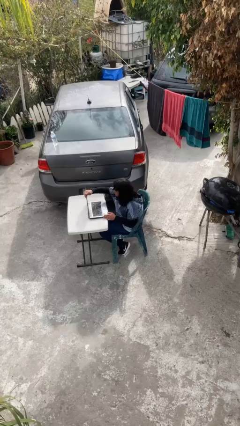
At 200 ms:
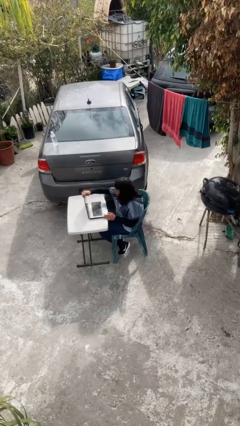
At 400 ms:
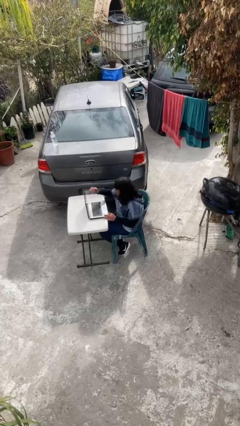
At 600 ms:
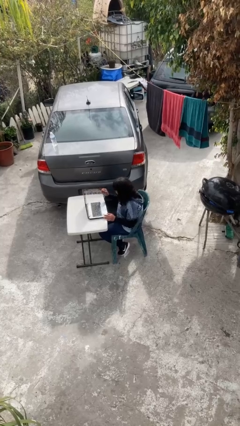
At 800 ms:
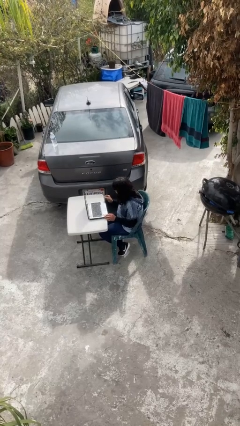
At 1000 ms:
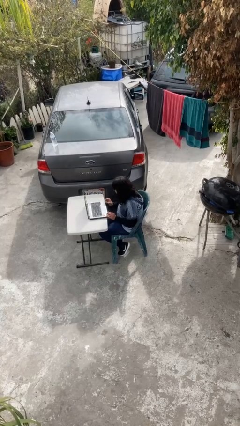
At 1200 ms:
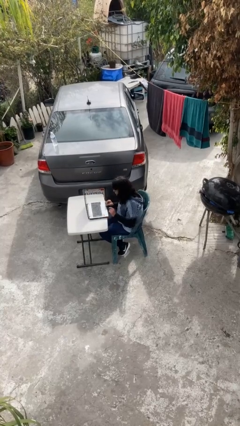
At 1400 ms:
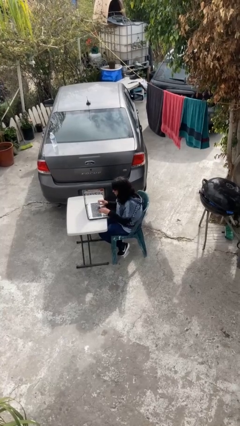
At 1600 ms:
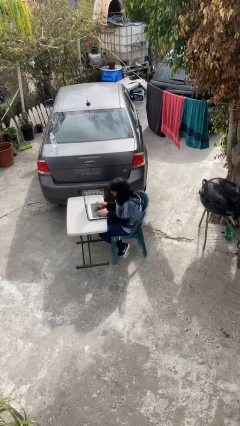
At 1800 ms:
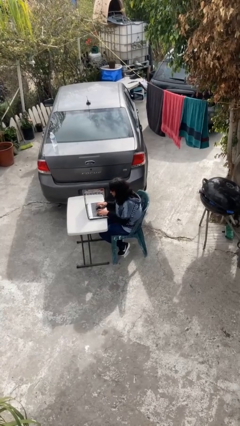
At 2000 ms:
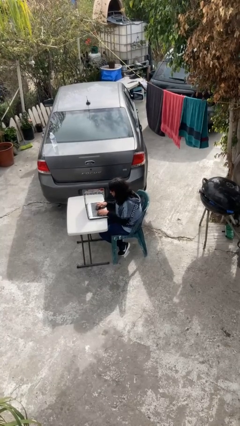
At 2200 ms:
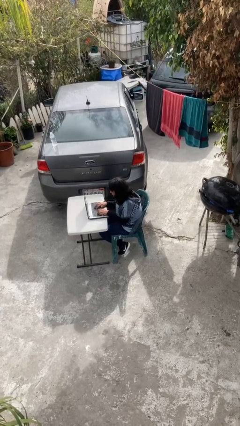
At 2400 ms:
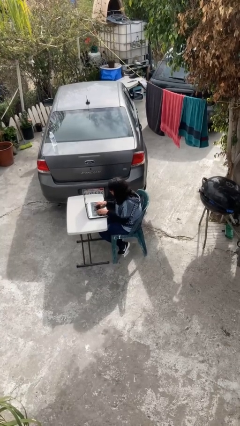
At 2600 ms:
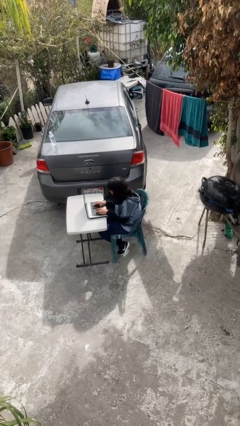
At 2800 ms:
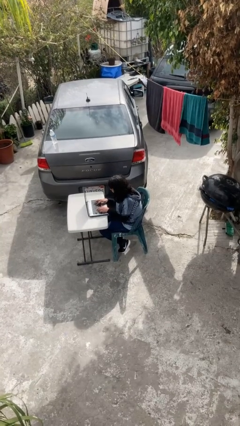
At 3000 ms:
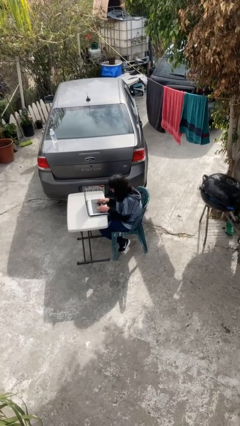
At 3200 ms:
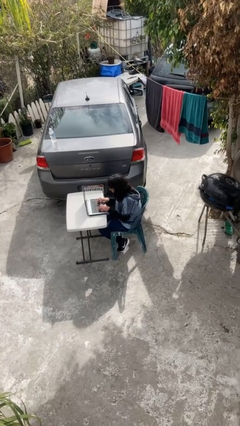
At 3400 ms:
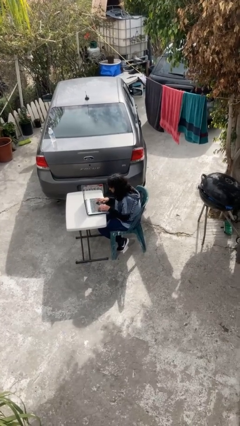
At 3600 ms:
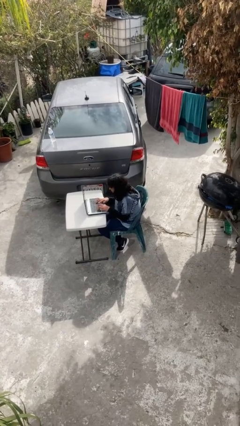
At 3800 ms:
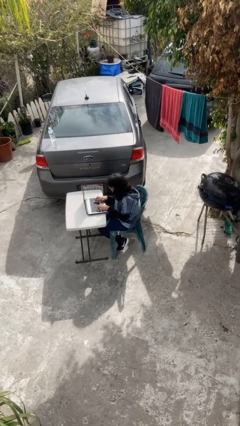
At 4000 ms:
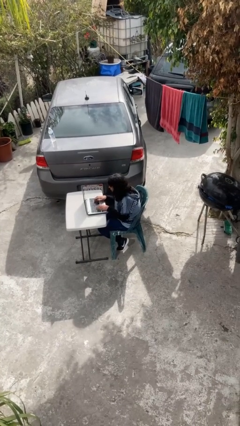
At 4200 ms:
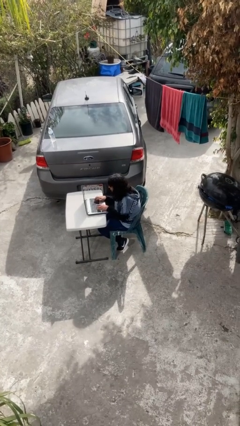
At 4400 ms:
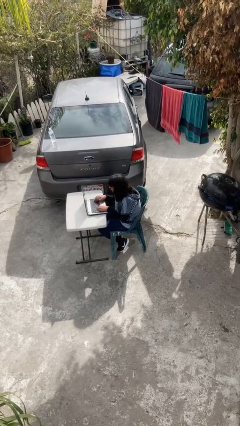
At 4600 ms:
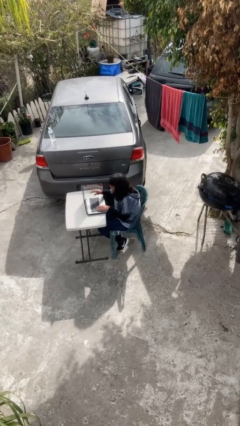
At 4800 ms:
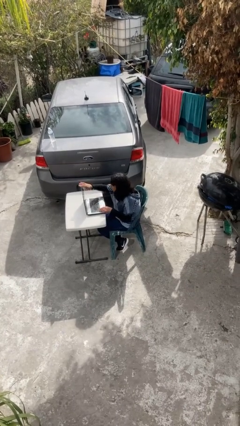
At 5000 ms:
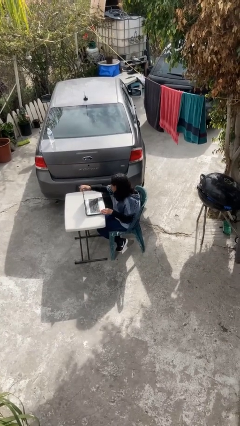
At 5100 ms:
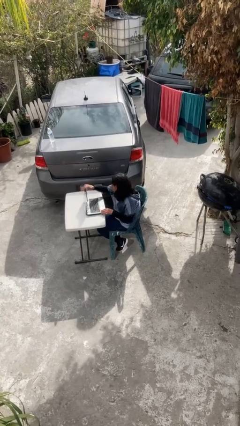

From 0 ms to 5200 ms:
person interacts with laptop

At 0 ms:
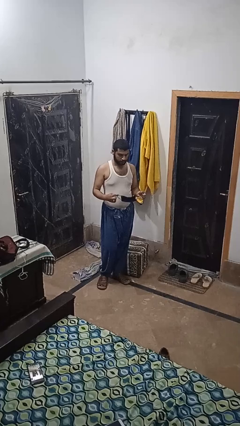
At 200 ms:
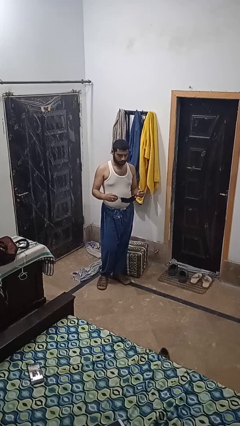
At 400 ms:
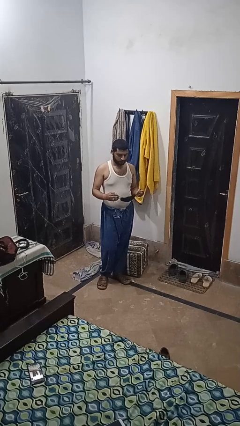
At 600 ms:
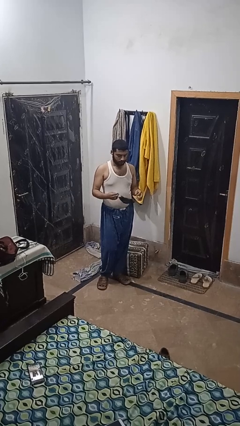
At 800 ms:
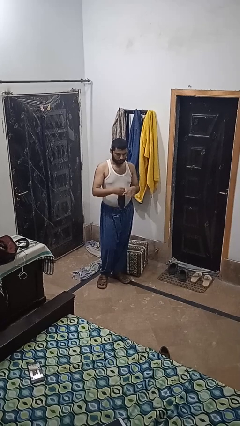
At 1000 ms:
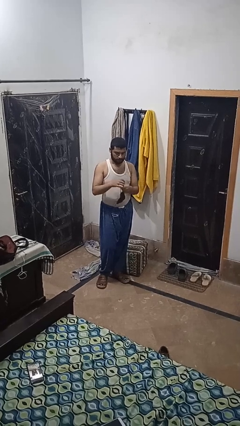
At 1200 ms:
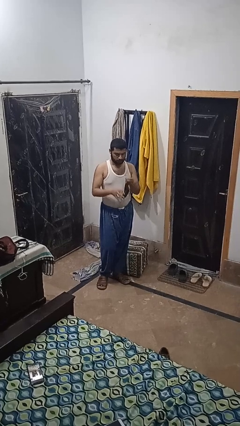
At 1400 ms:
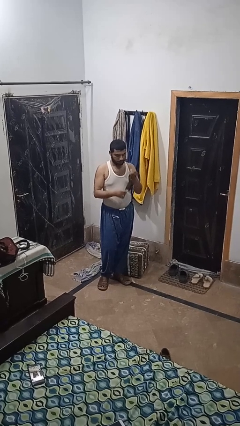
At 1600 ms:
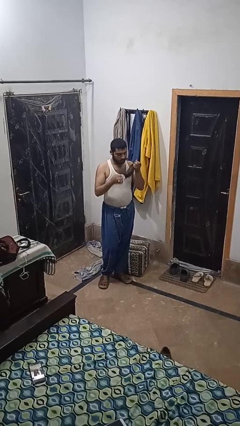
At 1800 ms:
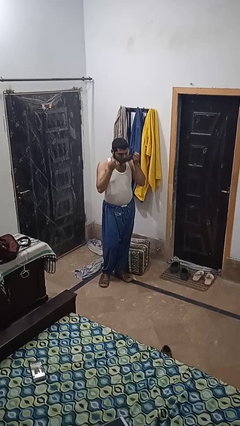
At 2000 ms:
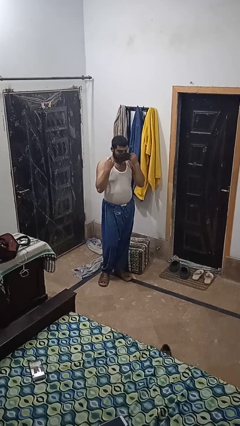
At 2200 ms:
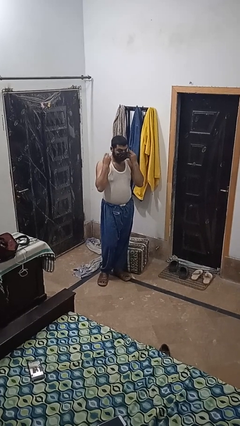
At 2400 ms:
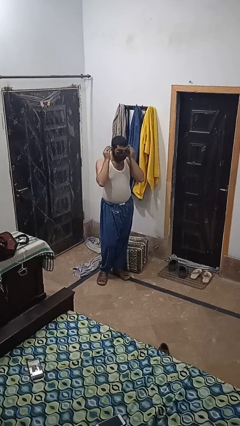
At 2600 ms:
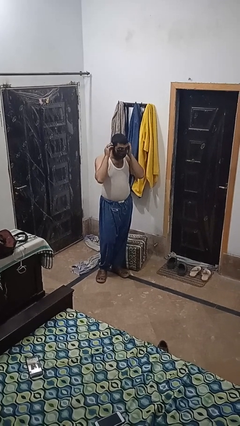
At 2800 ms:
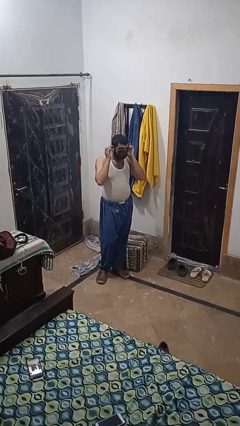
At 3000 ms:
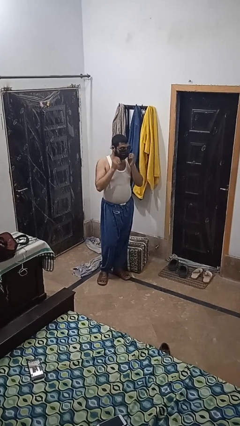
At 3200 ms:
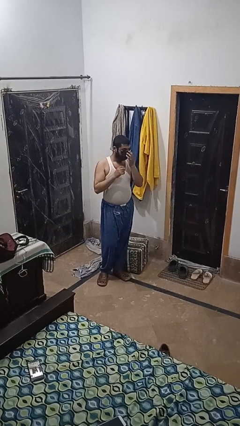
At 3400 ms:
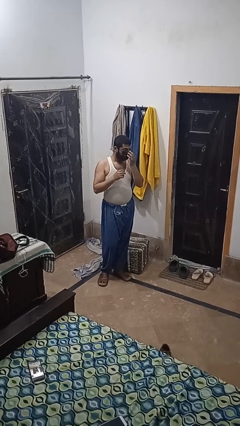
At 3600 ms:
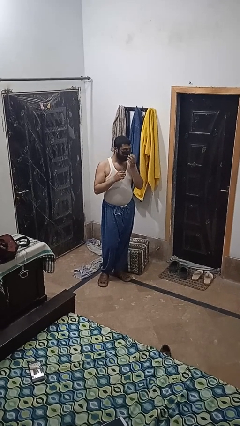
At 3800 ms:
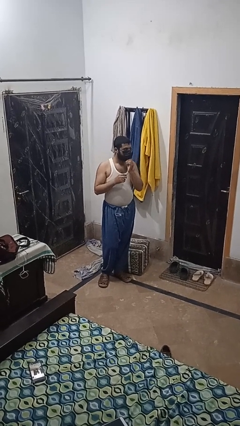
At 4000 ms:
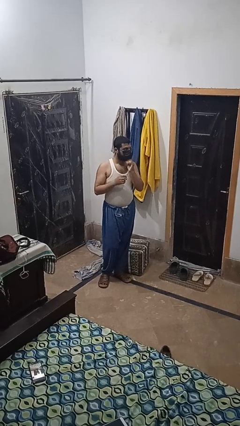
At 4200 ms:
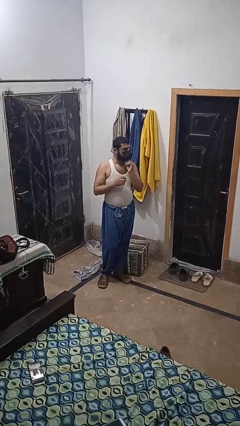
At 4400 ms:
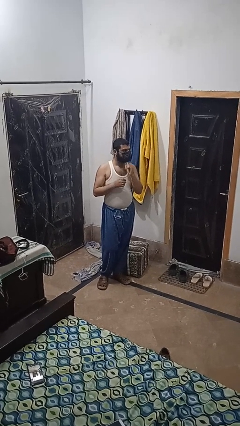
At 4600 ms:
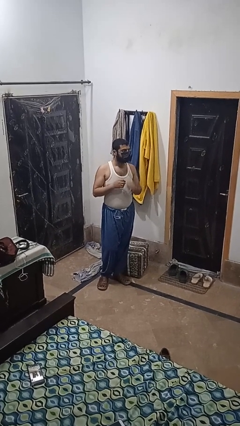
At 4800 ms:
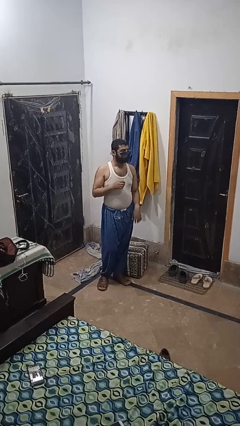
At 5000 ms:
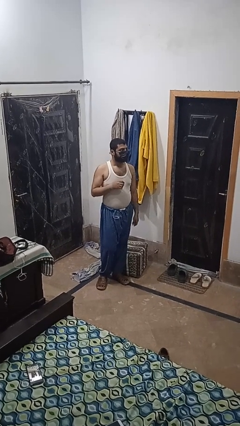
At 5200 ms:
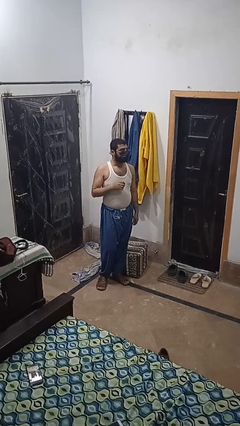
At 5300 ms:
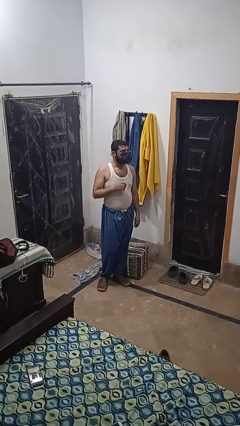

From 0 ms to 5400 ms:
person puts on facemask

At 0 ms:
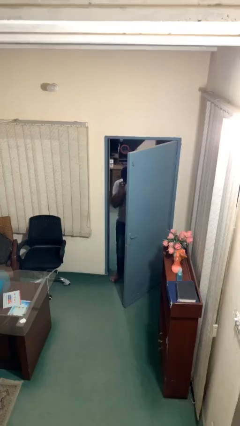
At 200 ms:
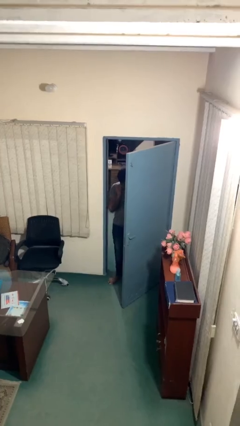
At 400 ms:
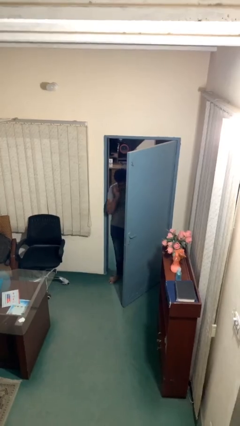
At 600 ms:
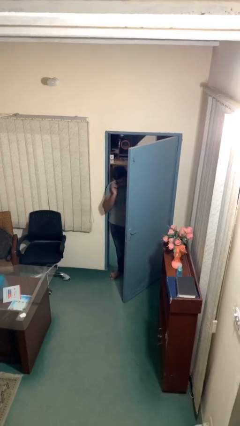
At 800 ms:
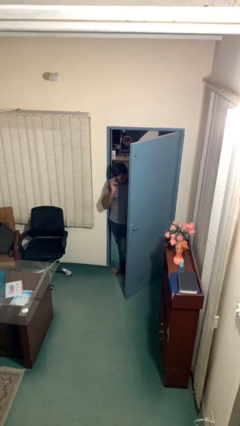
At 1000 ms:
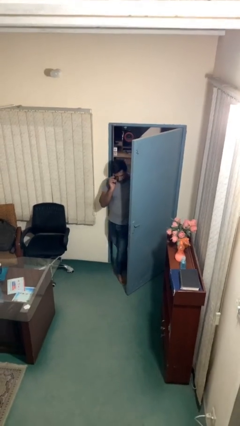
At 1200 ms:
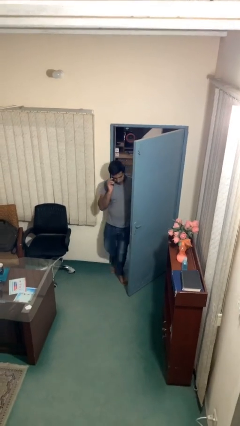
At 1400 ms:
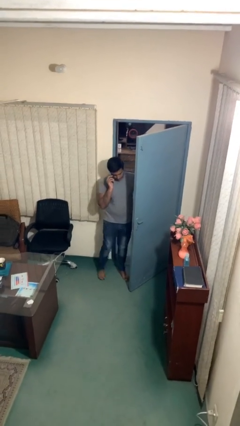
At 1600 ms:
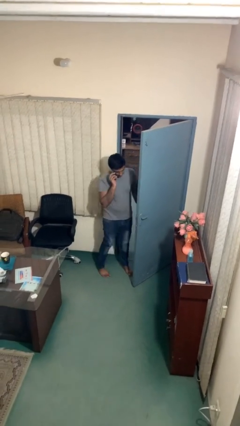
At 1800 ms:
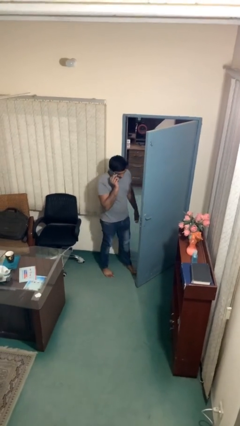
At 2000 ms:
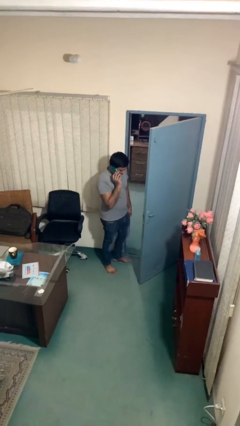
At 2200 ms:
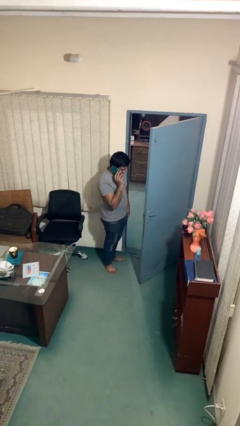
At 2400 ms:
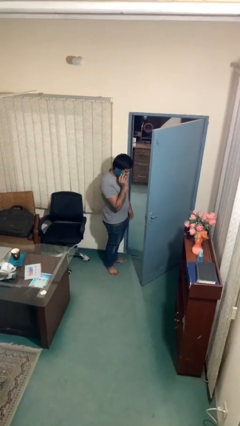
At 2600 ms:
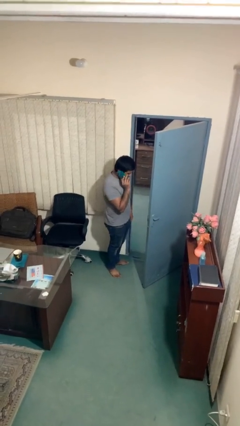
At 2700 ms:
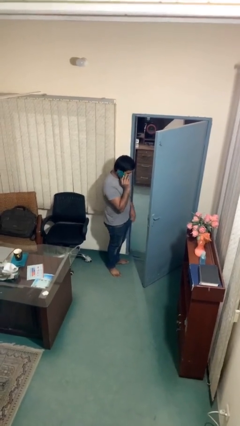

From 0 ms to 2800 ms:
person enters scene through structure

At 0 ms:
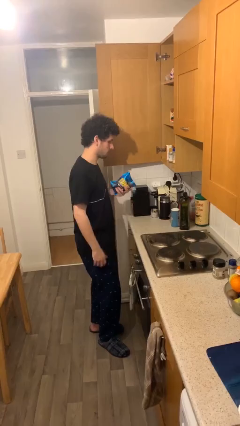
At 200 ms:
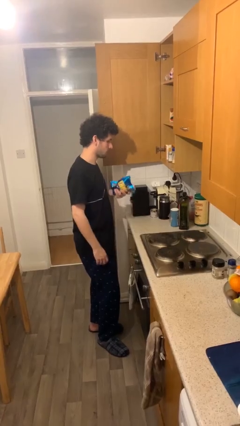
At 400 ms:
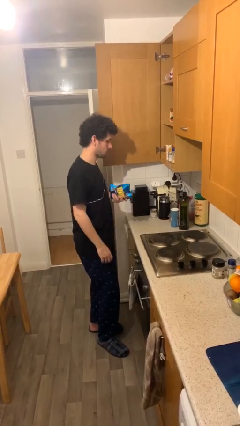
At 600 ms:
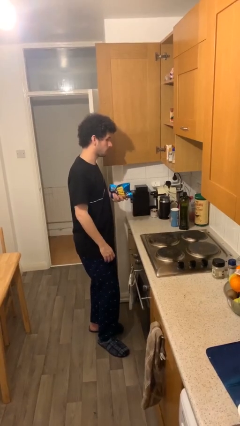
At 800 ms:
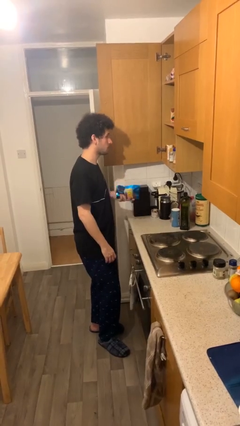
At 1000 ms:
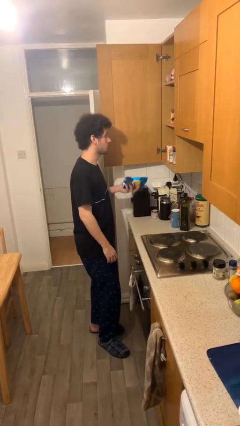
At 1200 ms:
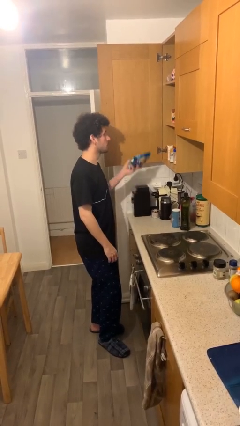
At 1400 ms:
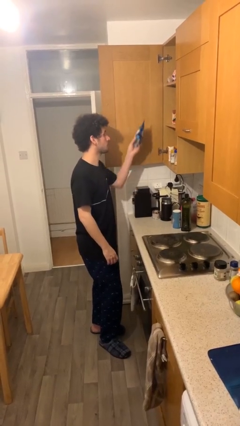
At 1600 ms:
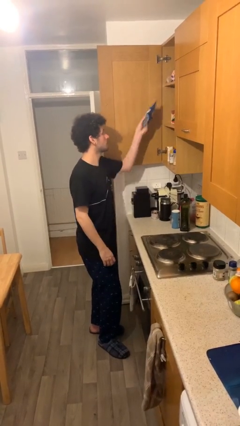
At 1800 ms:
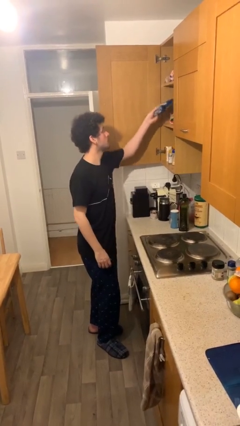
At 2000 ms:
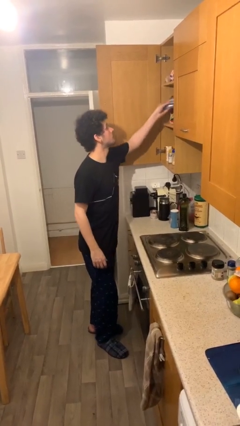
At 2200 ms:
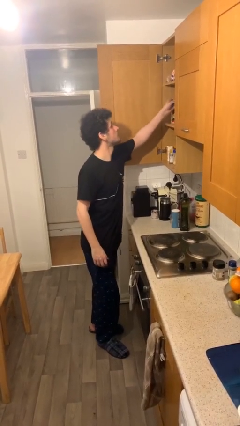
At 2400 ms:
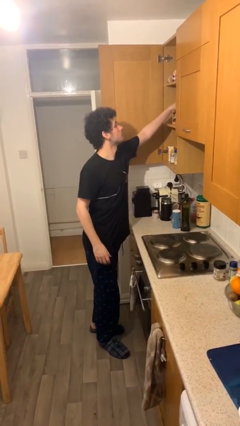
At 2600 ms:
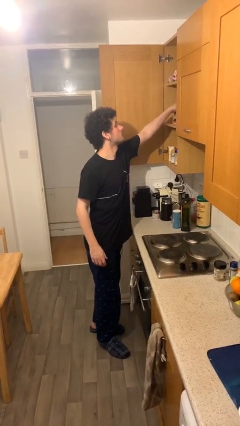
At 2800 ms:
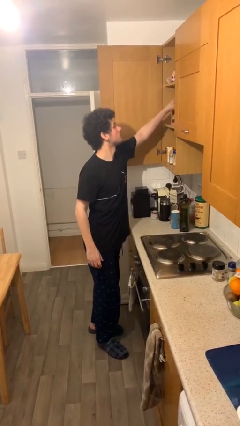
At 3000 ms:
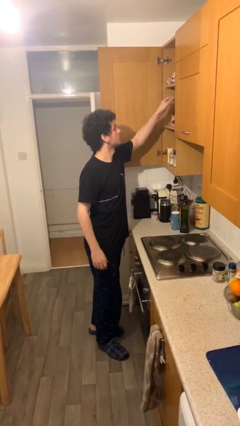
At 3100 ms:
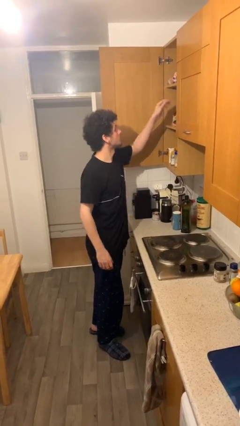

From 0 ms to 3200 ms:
person puts down object on shelf

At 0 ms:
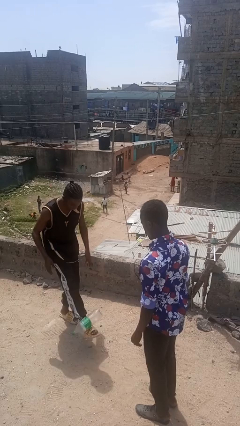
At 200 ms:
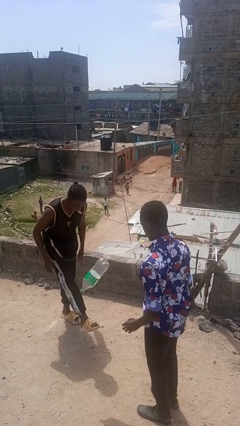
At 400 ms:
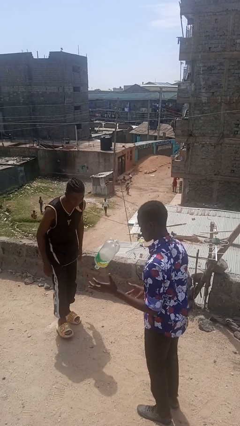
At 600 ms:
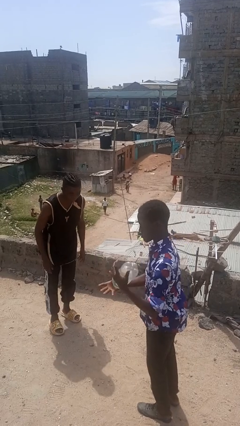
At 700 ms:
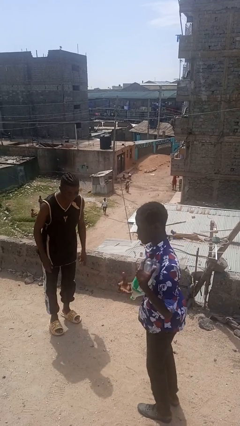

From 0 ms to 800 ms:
person kicks object to person

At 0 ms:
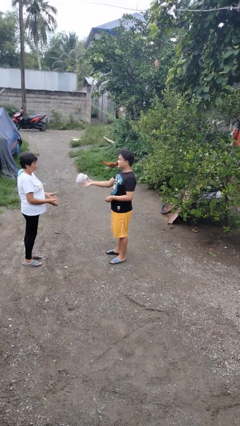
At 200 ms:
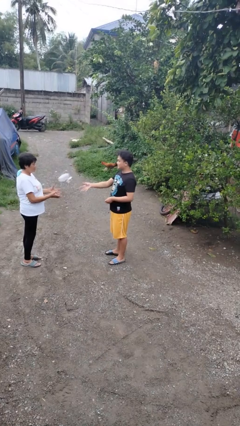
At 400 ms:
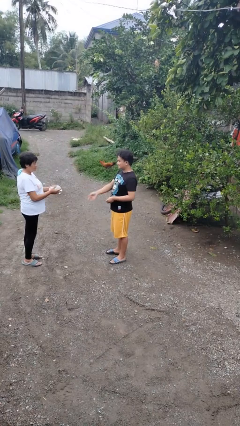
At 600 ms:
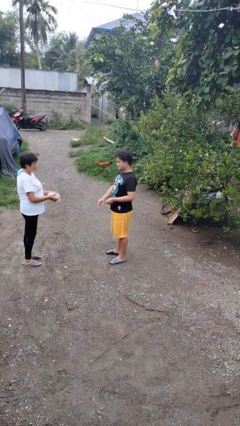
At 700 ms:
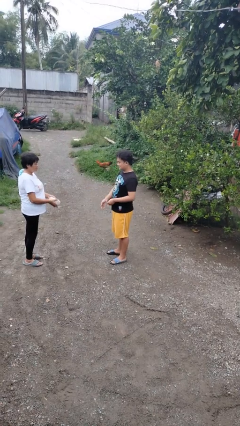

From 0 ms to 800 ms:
person throws object to person
